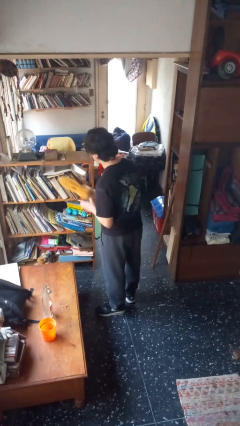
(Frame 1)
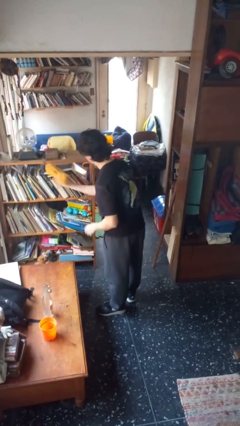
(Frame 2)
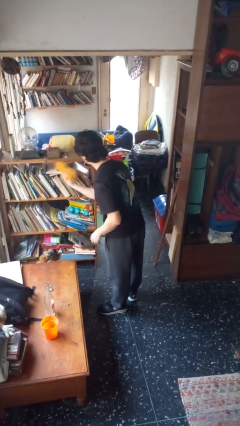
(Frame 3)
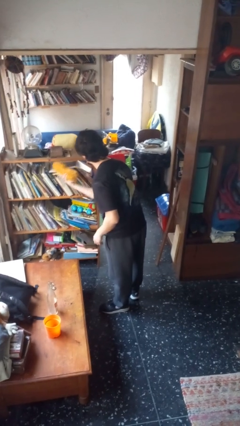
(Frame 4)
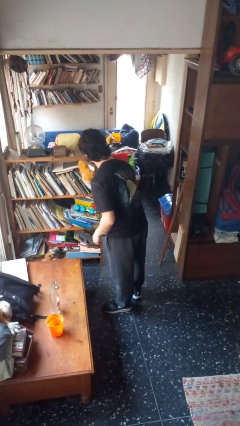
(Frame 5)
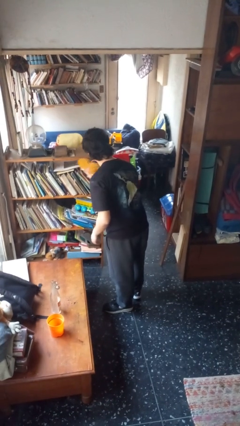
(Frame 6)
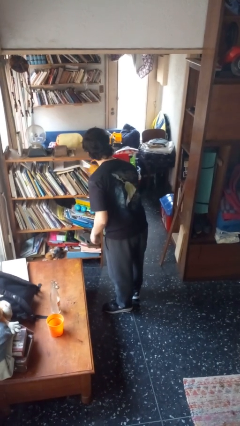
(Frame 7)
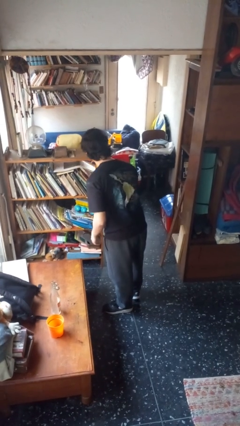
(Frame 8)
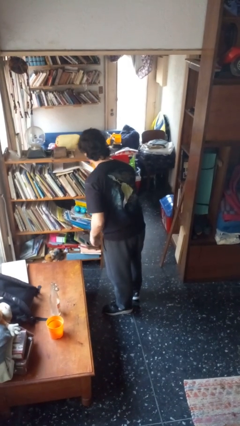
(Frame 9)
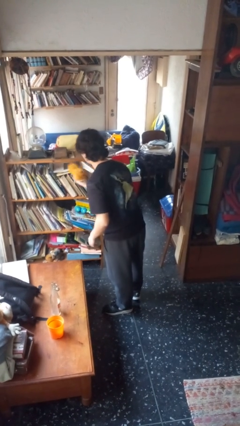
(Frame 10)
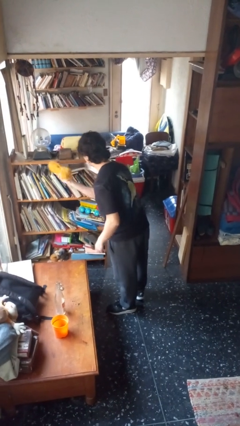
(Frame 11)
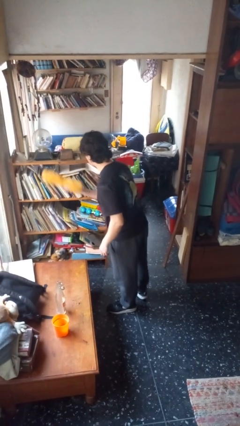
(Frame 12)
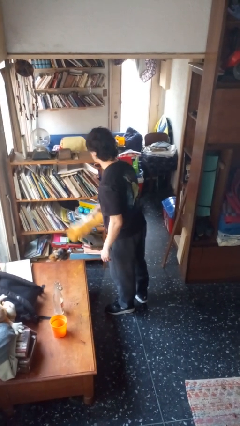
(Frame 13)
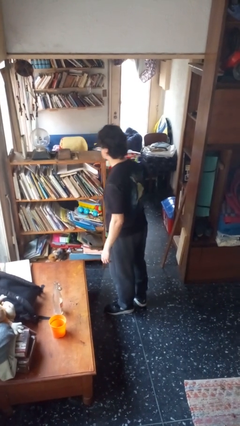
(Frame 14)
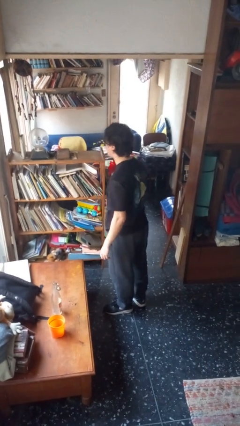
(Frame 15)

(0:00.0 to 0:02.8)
person dusts furniture

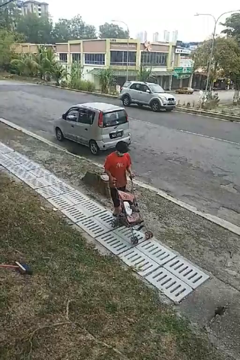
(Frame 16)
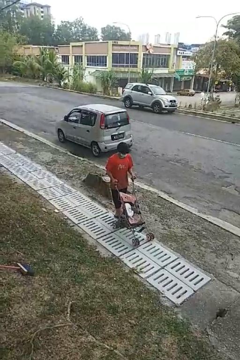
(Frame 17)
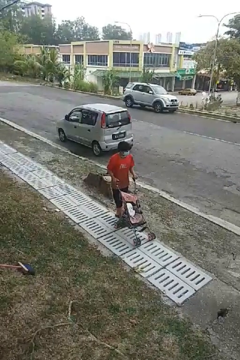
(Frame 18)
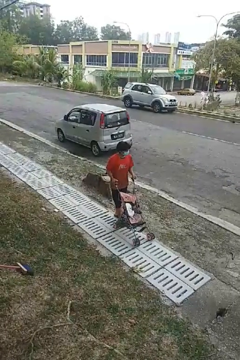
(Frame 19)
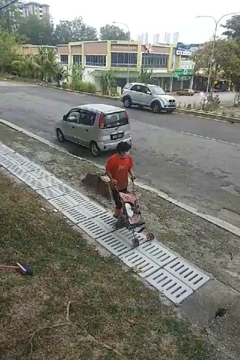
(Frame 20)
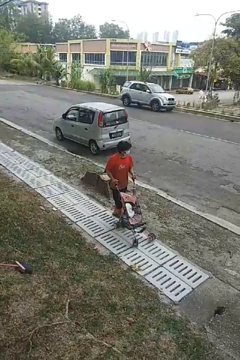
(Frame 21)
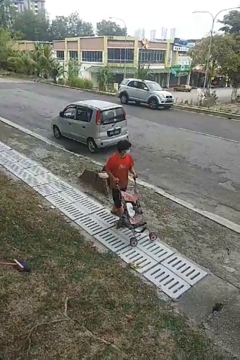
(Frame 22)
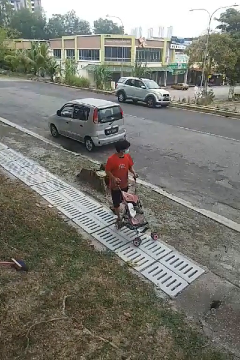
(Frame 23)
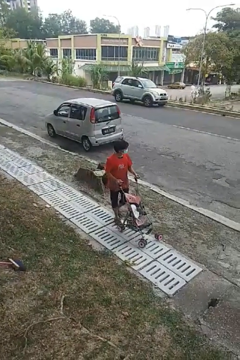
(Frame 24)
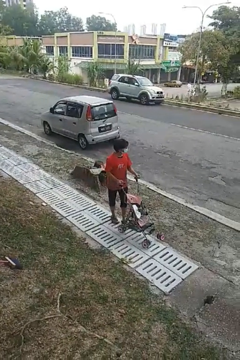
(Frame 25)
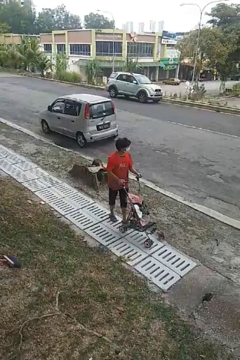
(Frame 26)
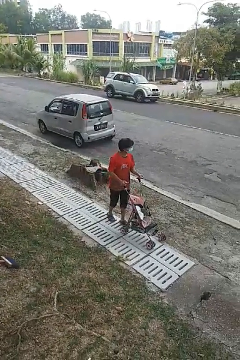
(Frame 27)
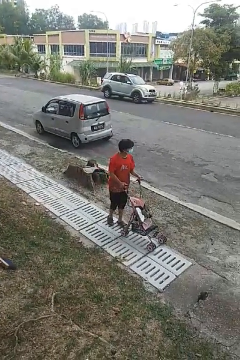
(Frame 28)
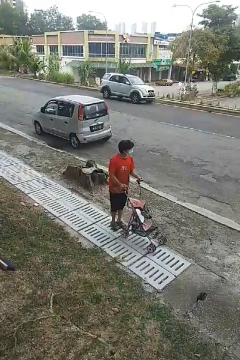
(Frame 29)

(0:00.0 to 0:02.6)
person pushes wheeled cart

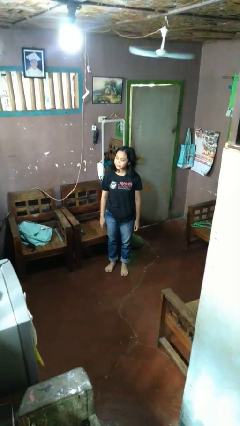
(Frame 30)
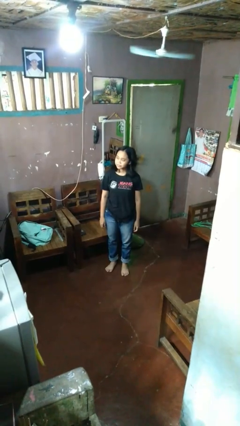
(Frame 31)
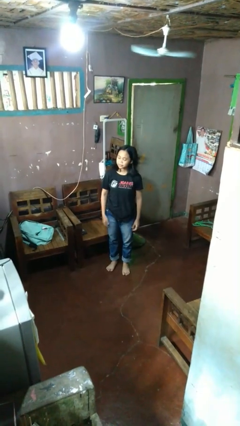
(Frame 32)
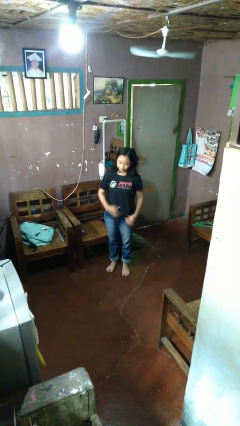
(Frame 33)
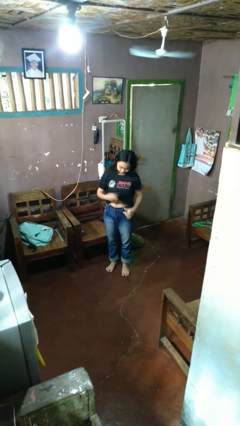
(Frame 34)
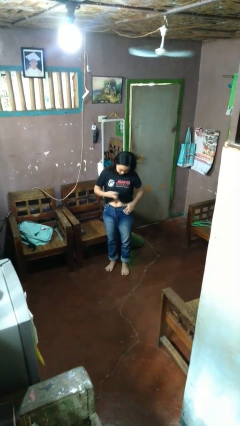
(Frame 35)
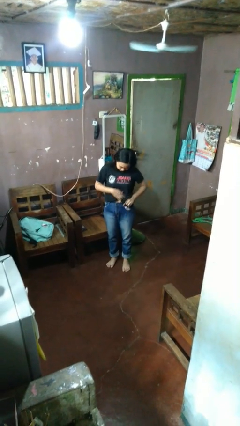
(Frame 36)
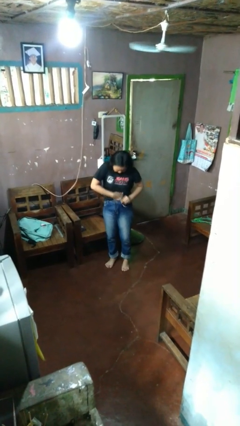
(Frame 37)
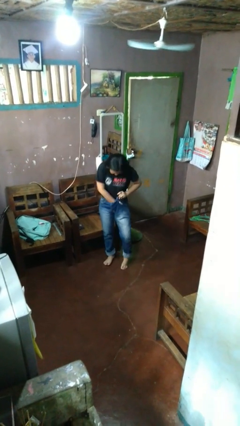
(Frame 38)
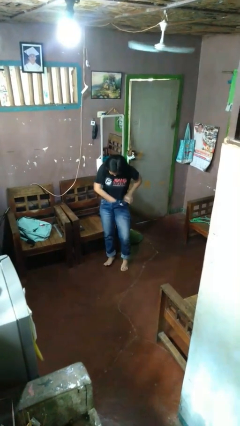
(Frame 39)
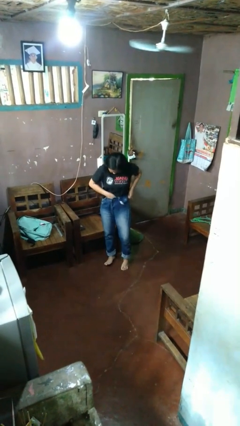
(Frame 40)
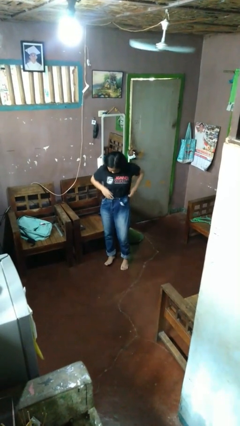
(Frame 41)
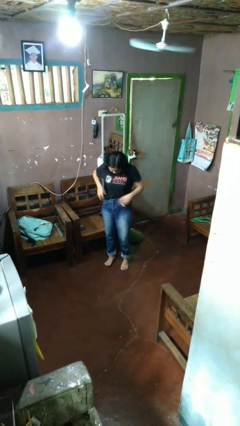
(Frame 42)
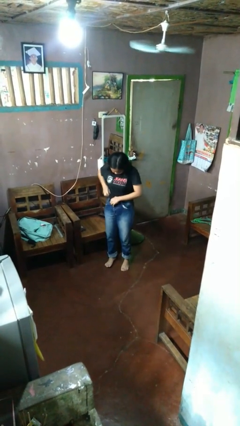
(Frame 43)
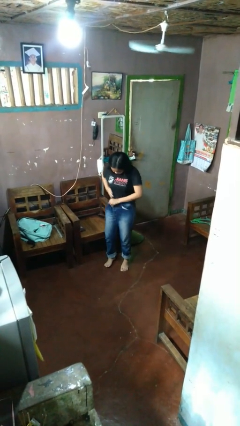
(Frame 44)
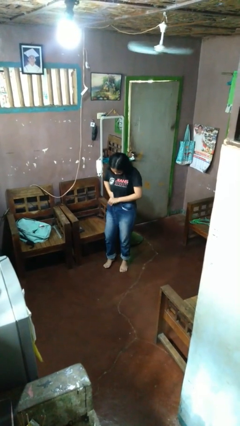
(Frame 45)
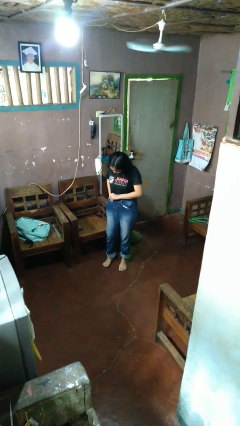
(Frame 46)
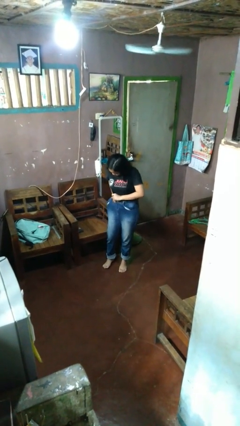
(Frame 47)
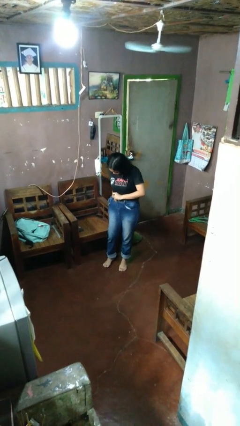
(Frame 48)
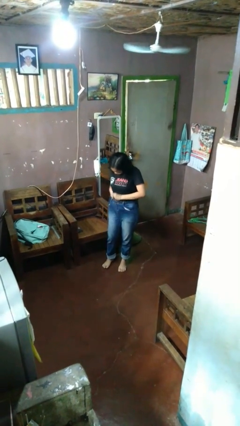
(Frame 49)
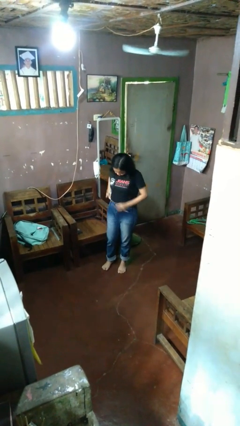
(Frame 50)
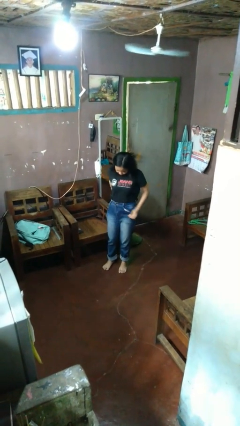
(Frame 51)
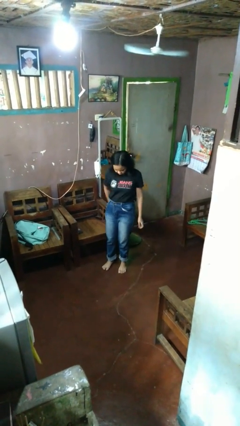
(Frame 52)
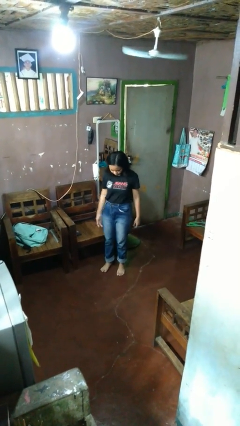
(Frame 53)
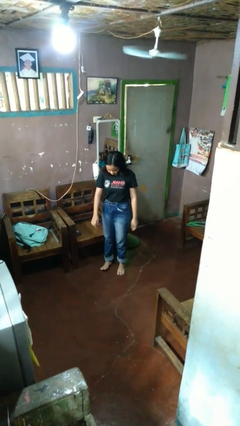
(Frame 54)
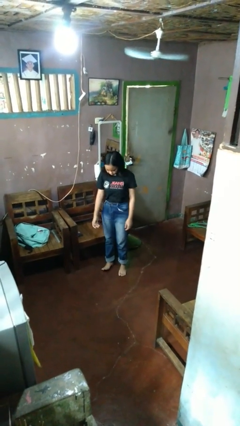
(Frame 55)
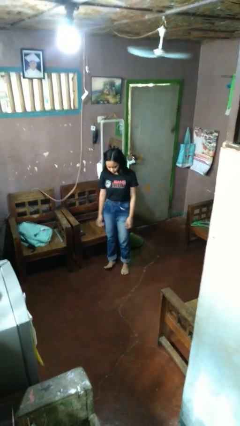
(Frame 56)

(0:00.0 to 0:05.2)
person tucks in shirt

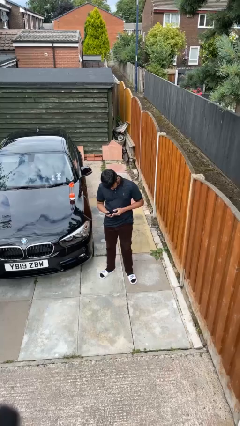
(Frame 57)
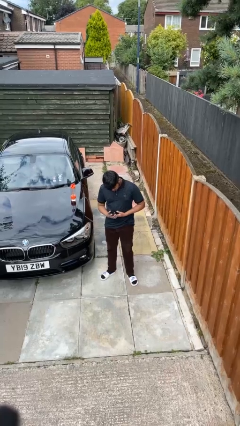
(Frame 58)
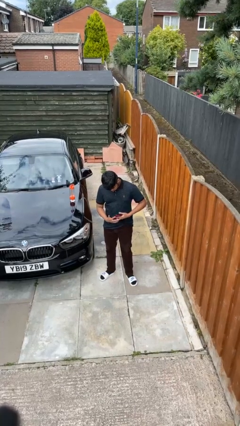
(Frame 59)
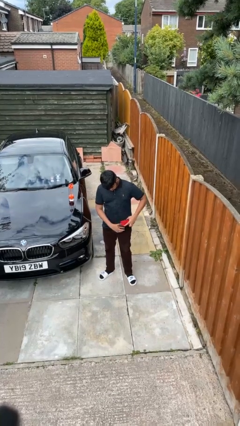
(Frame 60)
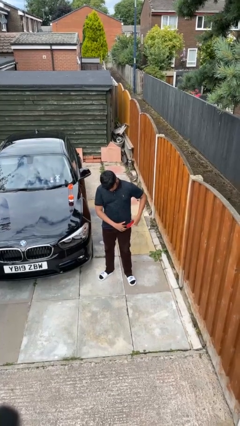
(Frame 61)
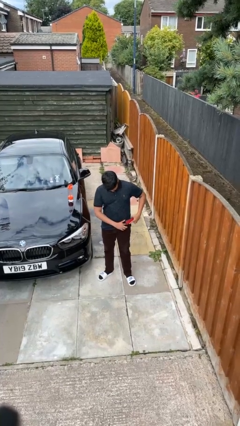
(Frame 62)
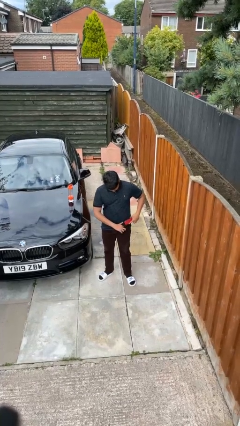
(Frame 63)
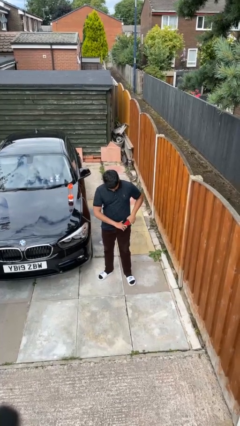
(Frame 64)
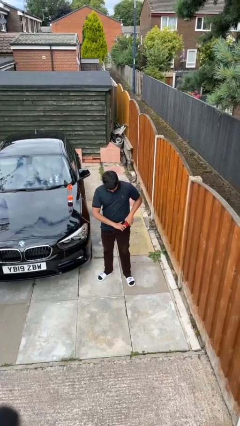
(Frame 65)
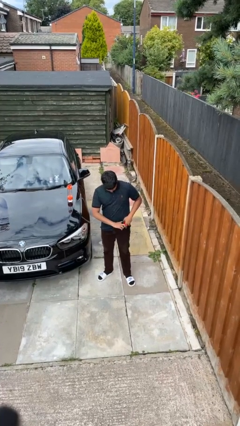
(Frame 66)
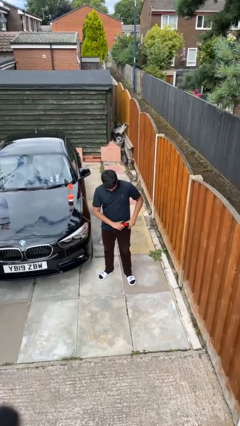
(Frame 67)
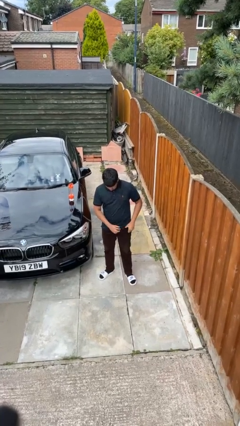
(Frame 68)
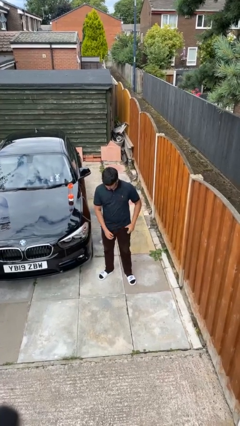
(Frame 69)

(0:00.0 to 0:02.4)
person puts phone into pocket

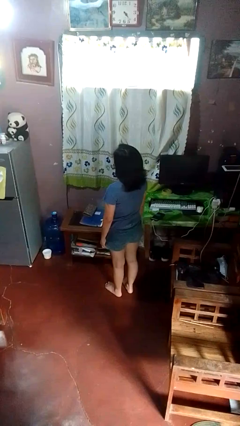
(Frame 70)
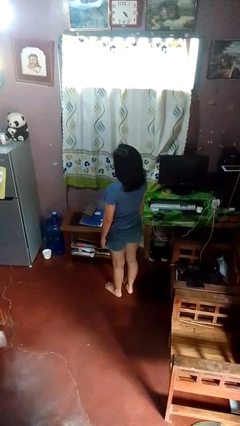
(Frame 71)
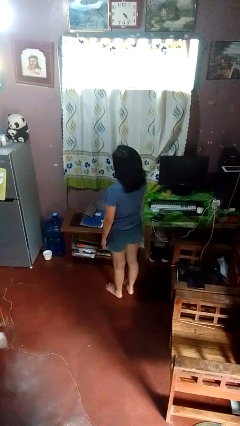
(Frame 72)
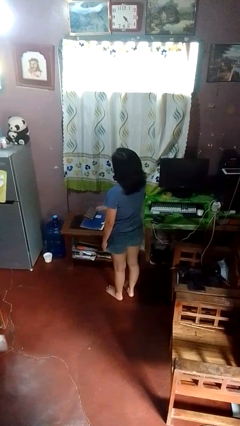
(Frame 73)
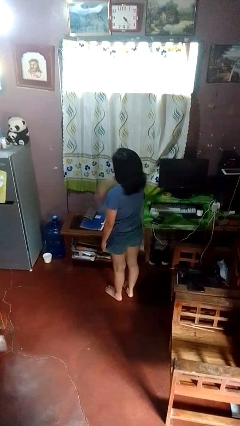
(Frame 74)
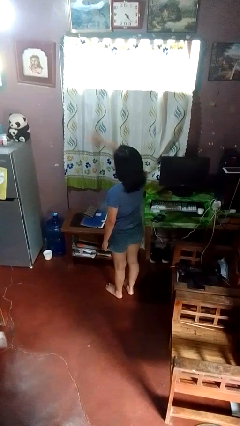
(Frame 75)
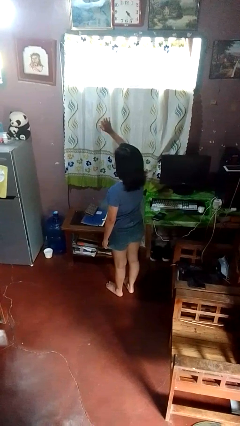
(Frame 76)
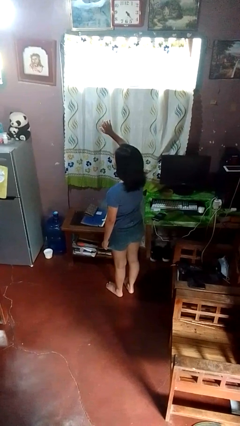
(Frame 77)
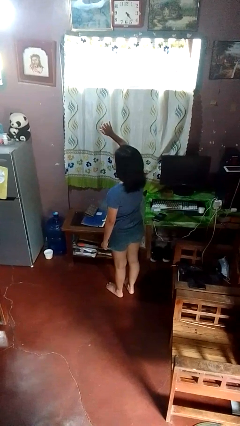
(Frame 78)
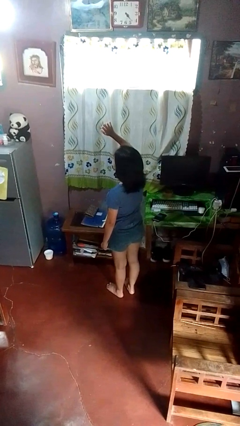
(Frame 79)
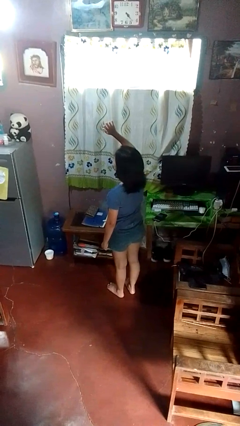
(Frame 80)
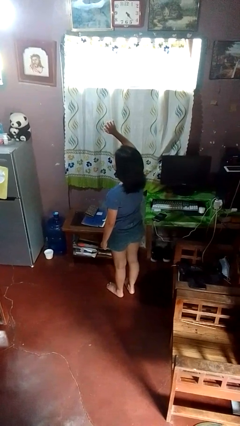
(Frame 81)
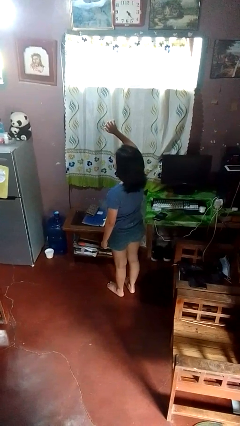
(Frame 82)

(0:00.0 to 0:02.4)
person gestures swipe up

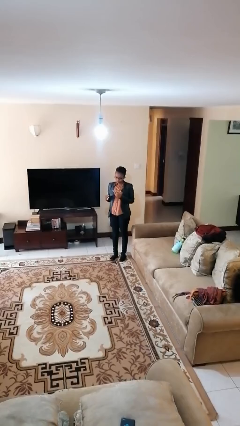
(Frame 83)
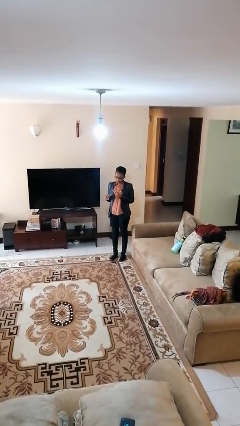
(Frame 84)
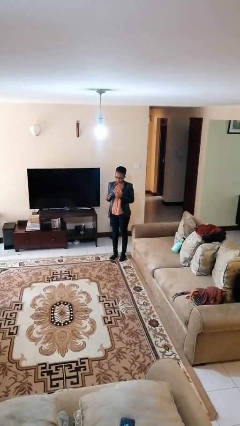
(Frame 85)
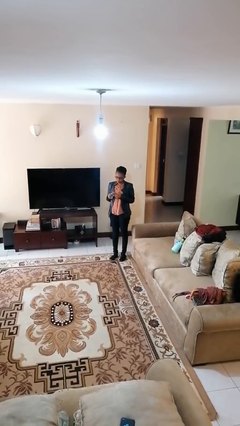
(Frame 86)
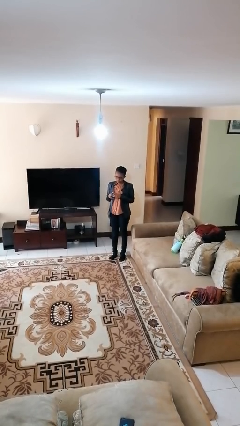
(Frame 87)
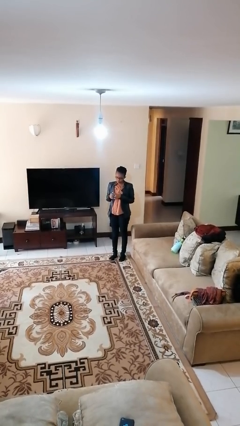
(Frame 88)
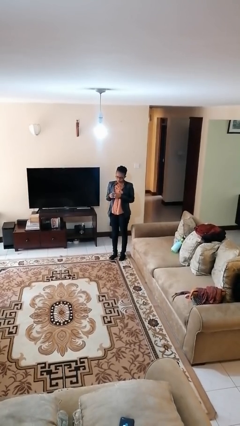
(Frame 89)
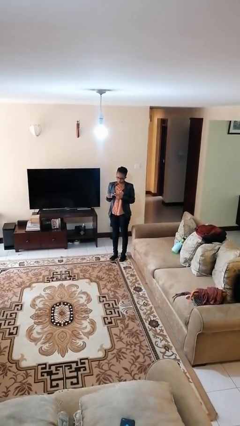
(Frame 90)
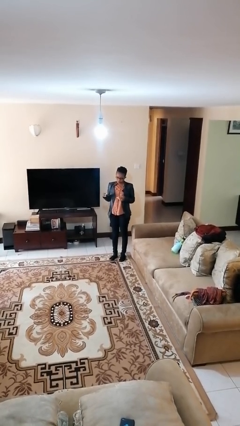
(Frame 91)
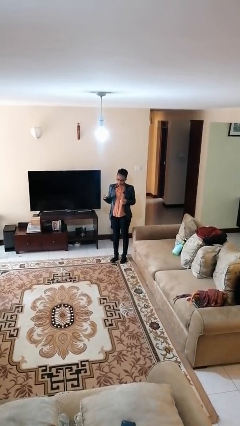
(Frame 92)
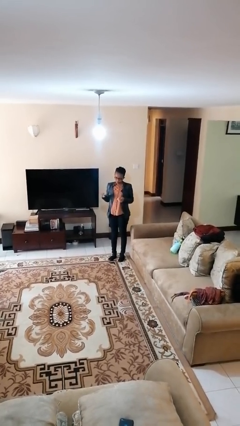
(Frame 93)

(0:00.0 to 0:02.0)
person takes off ring
